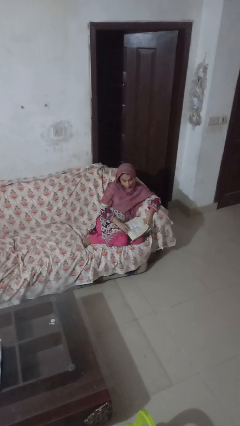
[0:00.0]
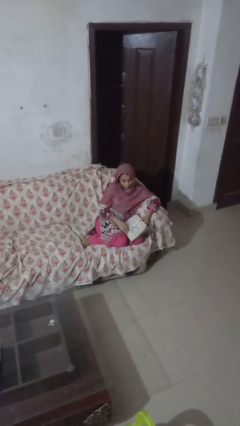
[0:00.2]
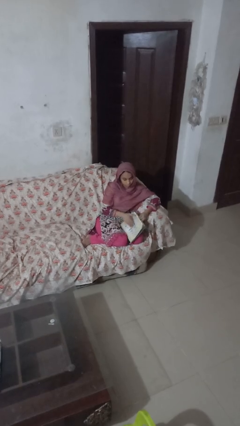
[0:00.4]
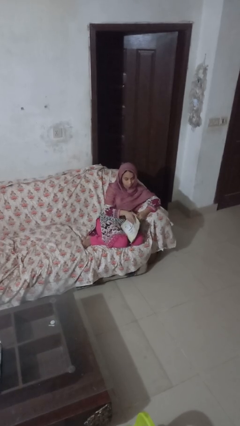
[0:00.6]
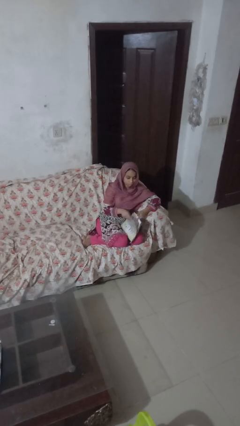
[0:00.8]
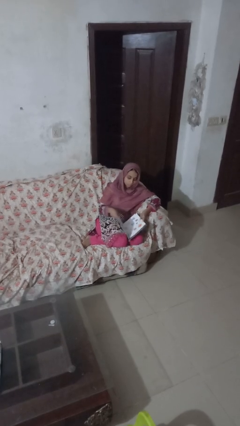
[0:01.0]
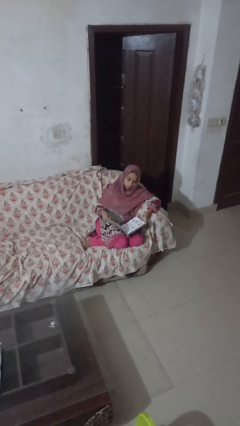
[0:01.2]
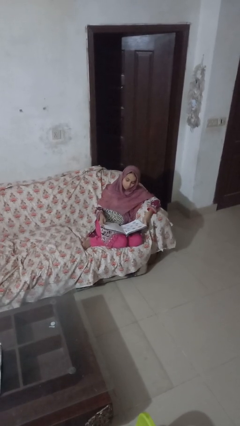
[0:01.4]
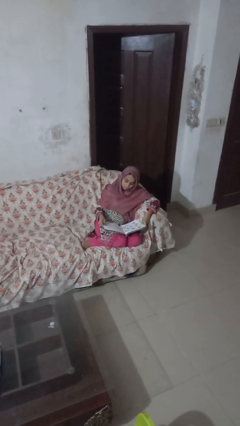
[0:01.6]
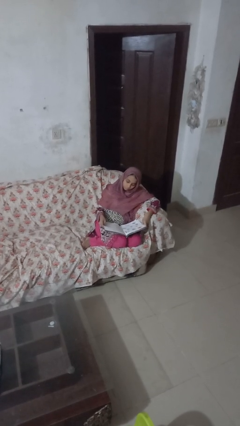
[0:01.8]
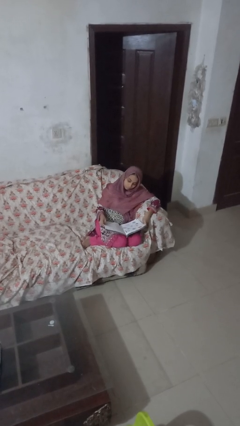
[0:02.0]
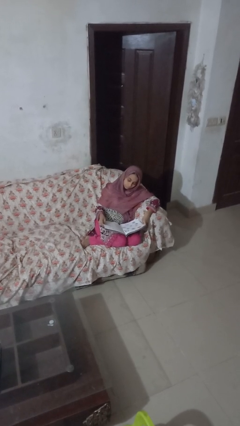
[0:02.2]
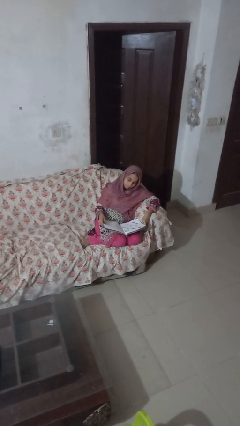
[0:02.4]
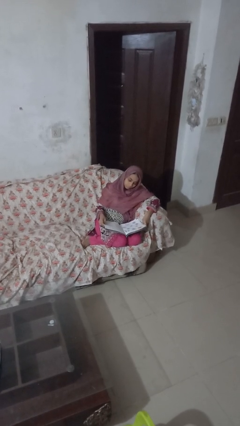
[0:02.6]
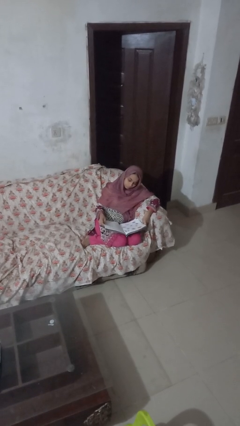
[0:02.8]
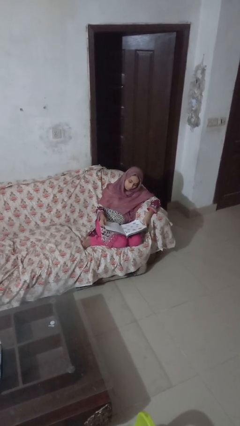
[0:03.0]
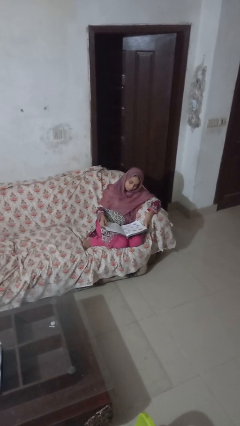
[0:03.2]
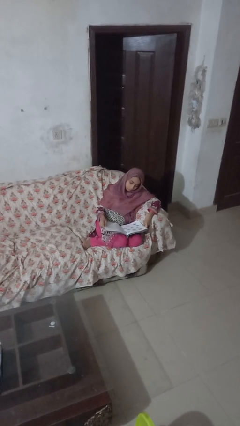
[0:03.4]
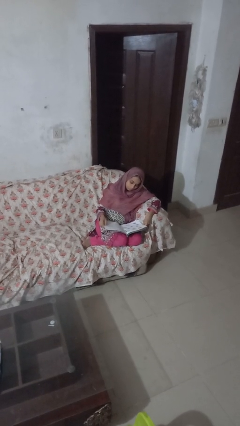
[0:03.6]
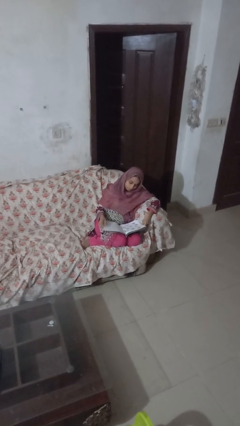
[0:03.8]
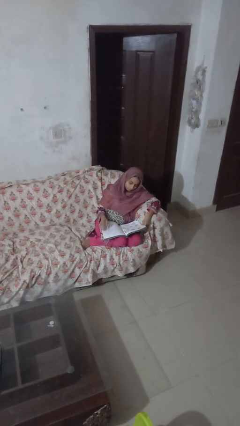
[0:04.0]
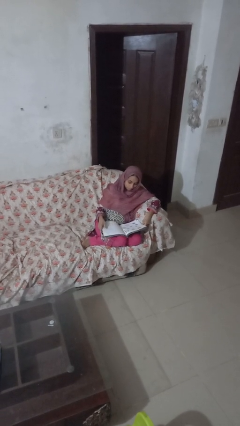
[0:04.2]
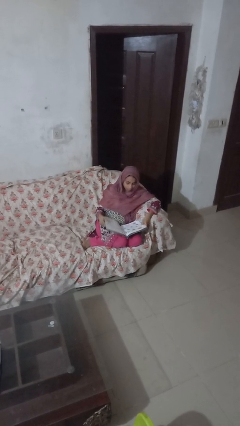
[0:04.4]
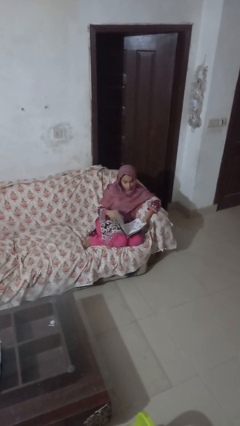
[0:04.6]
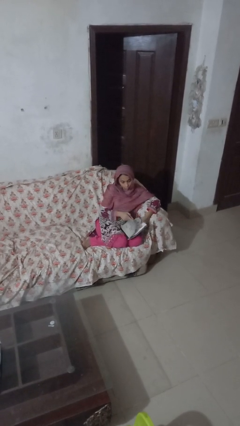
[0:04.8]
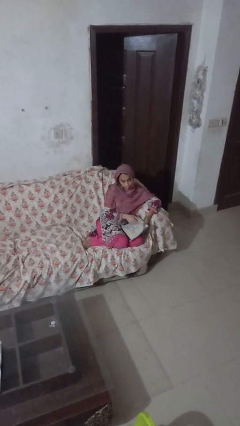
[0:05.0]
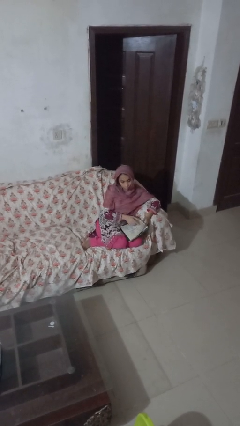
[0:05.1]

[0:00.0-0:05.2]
person reads book

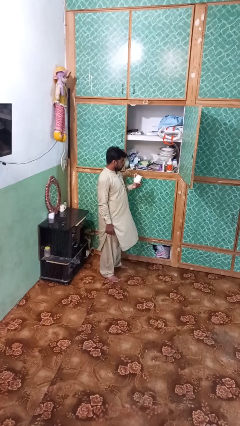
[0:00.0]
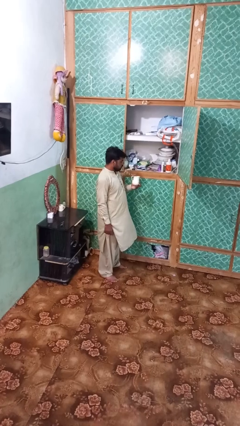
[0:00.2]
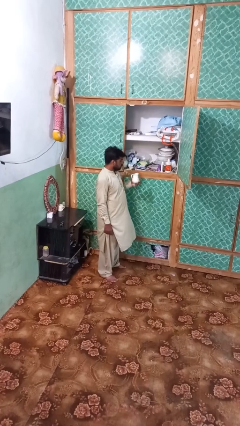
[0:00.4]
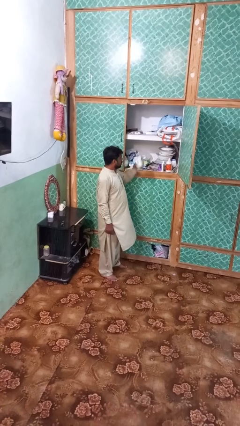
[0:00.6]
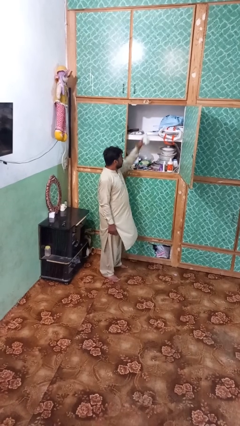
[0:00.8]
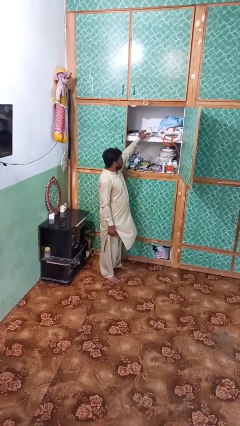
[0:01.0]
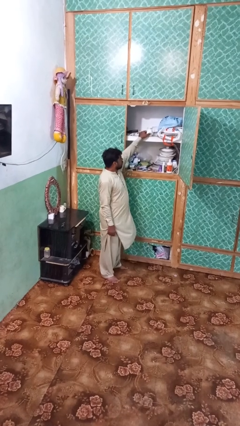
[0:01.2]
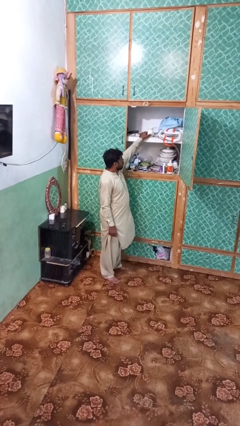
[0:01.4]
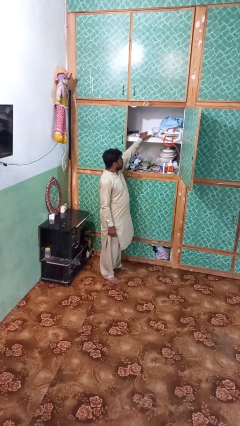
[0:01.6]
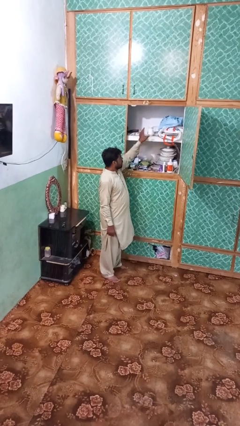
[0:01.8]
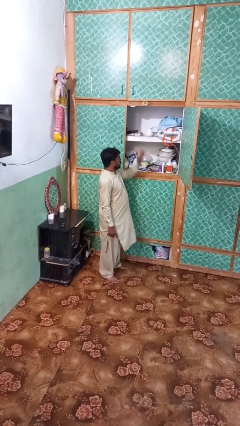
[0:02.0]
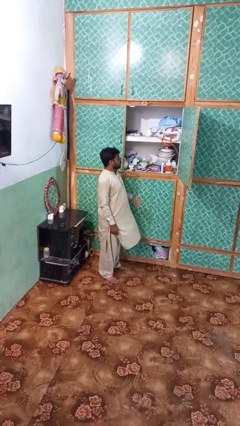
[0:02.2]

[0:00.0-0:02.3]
person puts down object on shelf

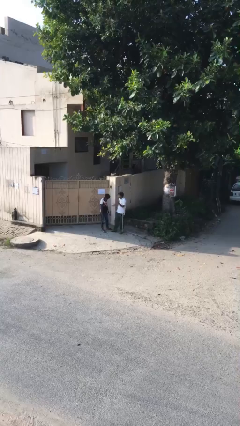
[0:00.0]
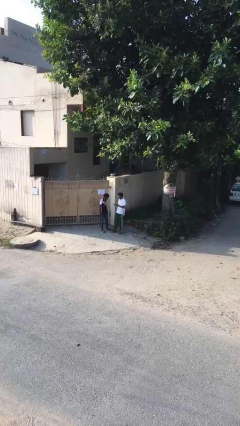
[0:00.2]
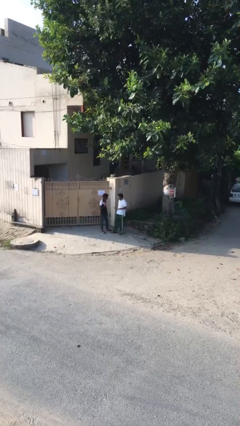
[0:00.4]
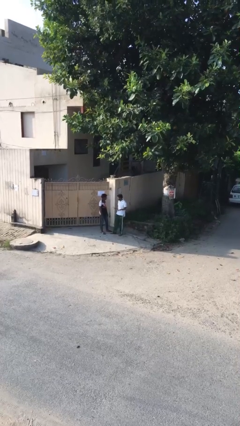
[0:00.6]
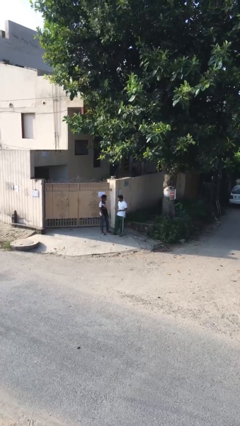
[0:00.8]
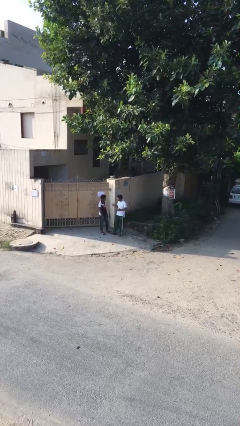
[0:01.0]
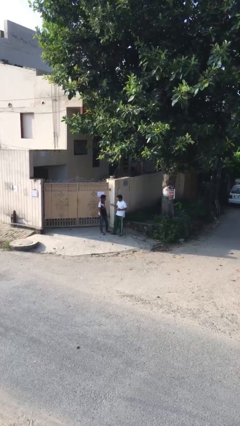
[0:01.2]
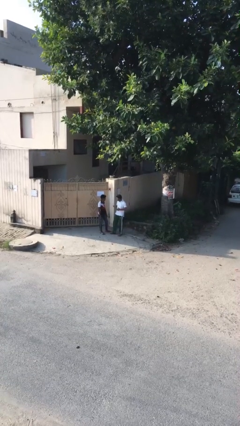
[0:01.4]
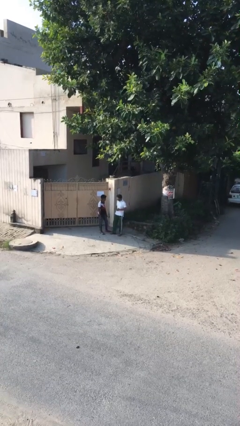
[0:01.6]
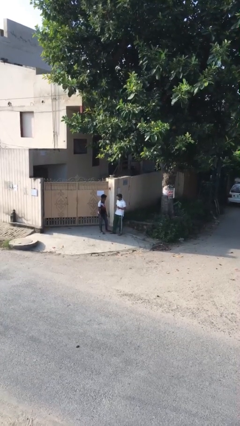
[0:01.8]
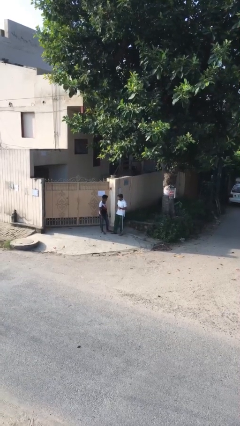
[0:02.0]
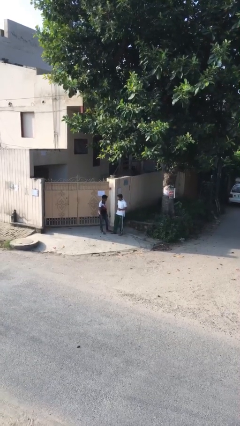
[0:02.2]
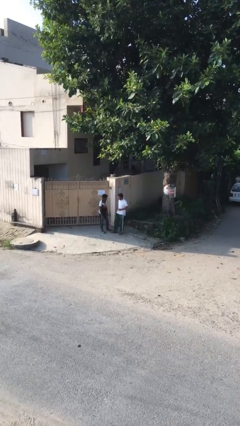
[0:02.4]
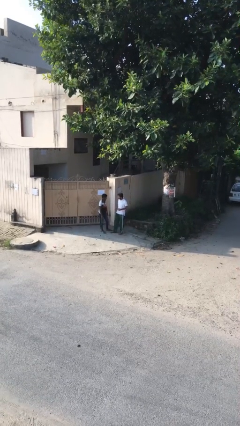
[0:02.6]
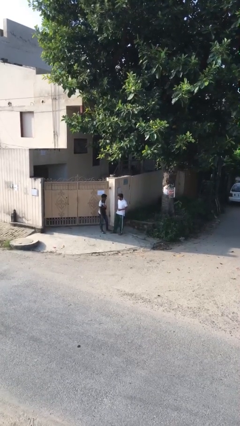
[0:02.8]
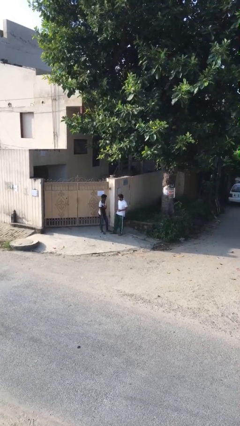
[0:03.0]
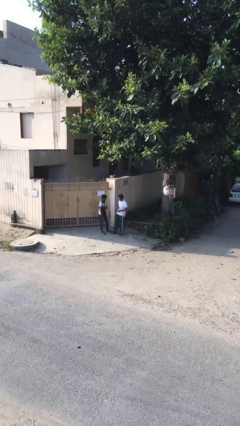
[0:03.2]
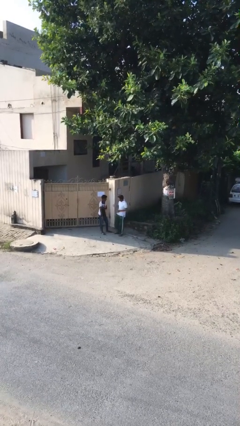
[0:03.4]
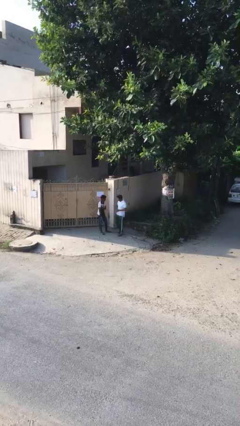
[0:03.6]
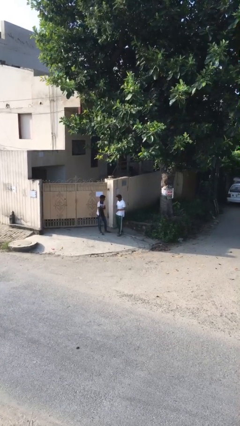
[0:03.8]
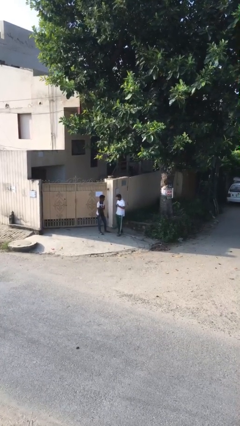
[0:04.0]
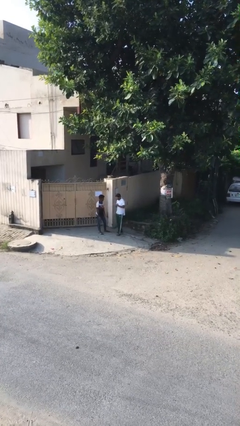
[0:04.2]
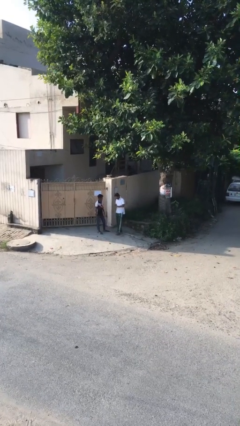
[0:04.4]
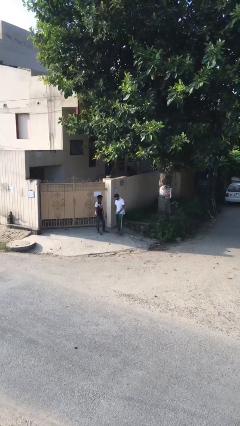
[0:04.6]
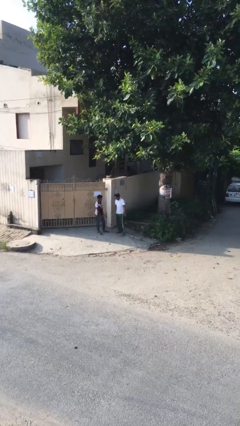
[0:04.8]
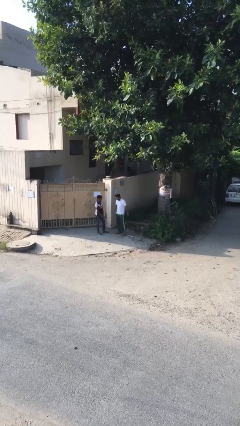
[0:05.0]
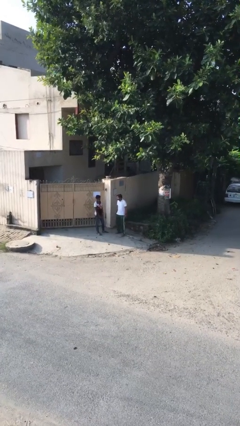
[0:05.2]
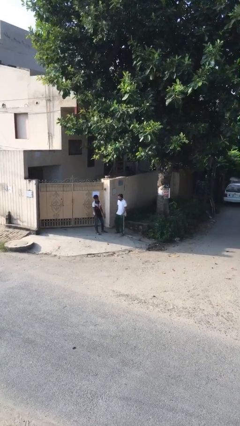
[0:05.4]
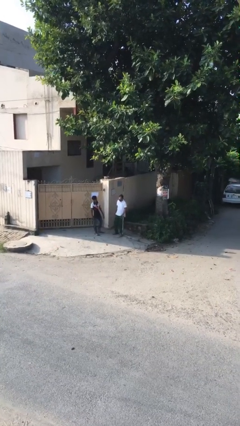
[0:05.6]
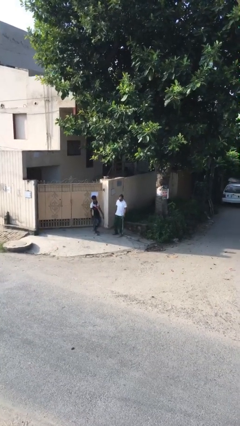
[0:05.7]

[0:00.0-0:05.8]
person talks to person

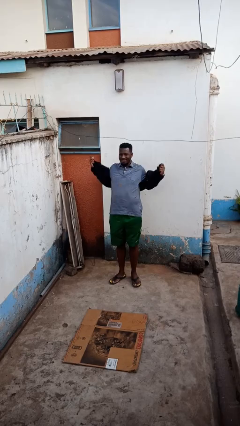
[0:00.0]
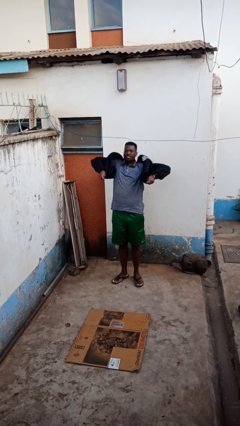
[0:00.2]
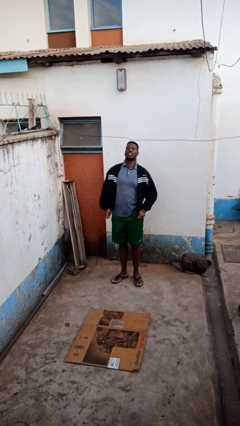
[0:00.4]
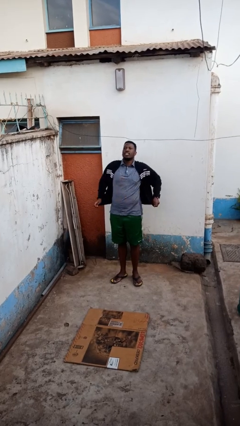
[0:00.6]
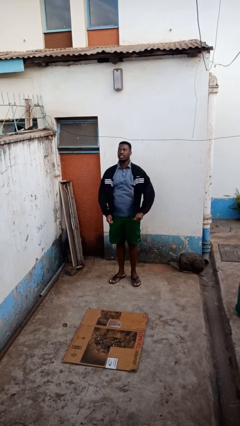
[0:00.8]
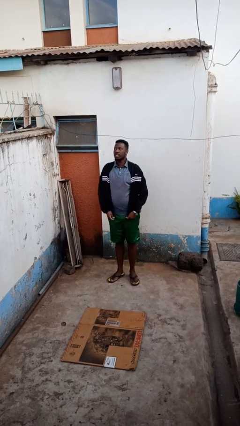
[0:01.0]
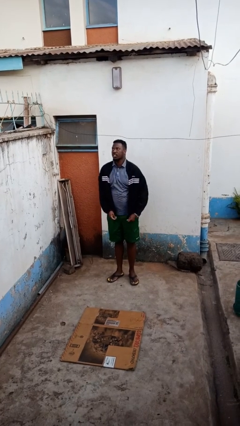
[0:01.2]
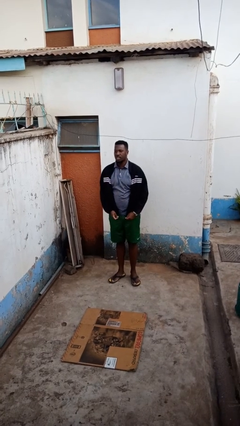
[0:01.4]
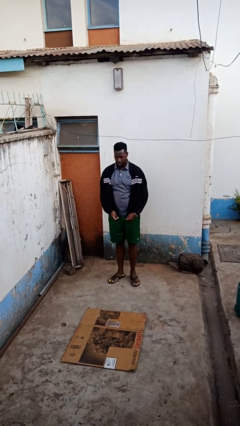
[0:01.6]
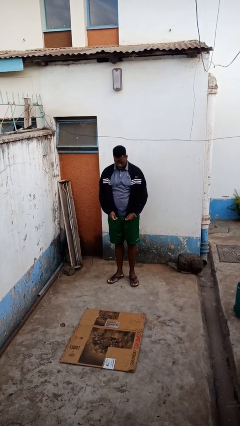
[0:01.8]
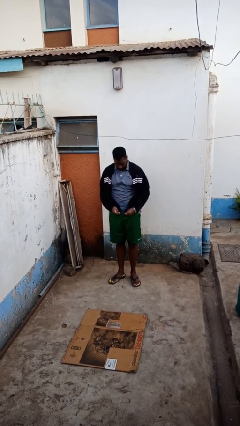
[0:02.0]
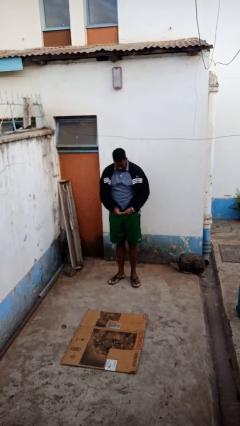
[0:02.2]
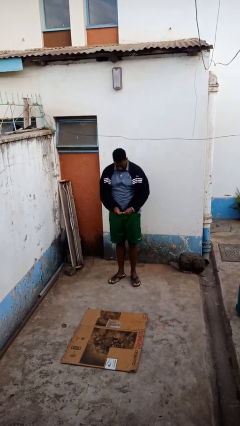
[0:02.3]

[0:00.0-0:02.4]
person puts on jacket

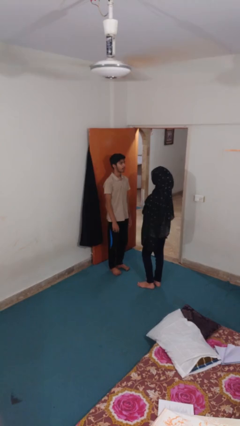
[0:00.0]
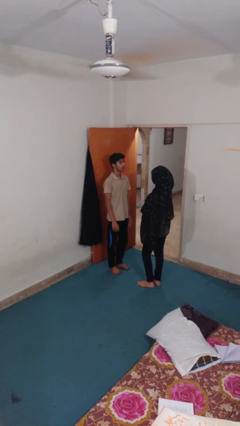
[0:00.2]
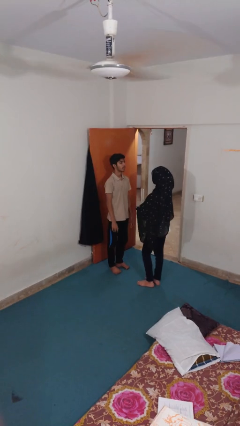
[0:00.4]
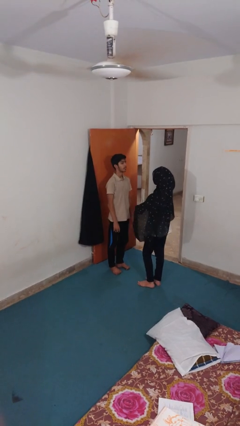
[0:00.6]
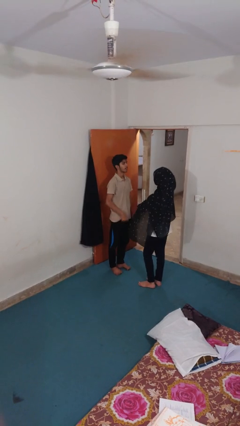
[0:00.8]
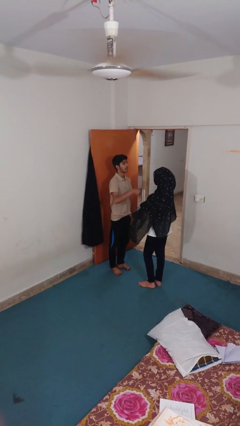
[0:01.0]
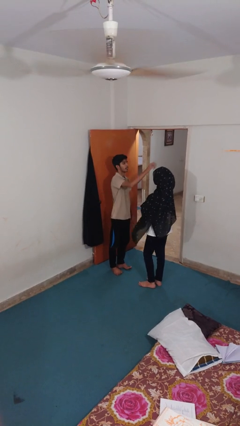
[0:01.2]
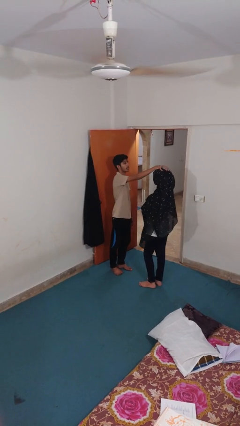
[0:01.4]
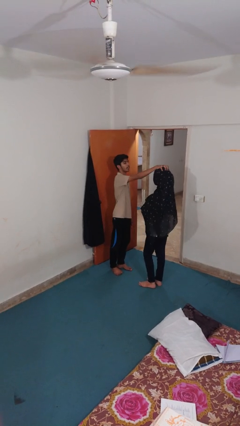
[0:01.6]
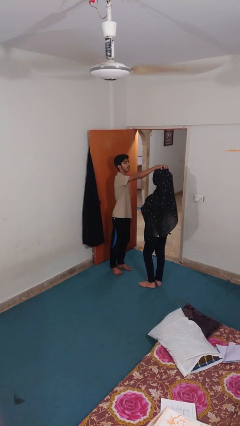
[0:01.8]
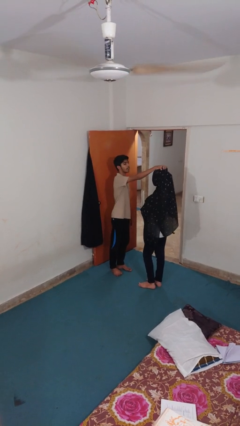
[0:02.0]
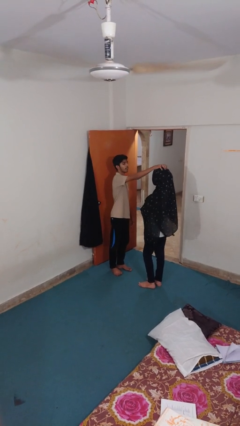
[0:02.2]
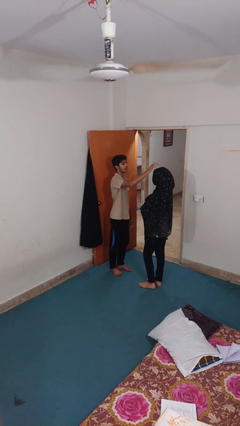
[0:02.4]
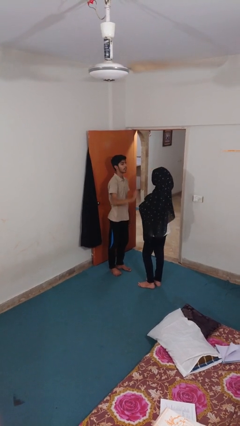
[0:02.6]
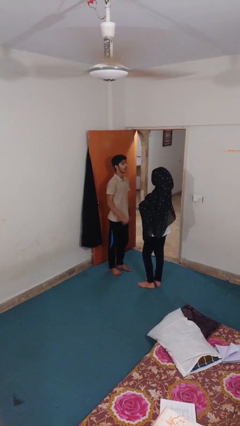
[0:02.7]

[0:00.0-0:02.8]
person grabs person by hair
